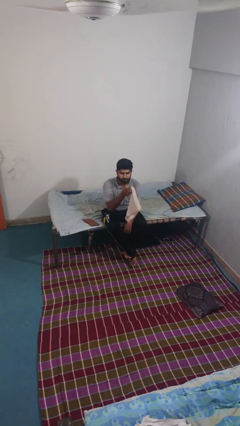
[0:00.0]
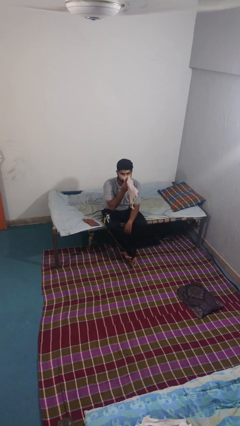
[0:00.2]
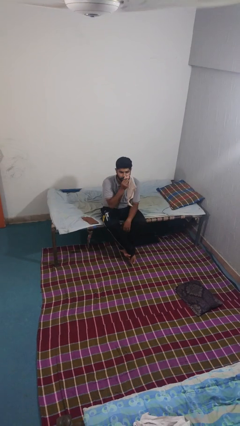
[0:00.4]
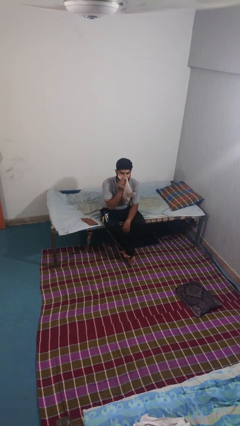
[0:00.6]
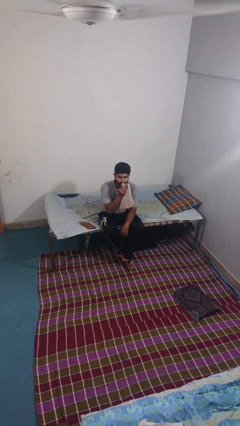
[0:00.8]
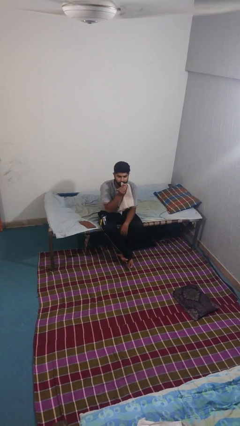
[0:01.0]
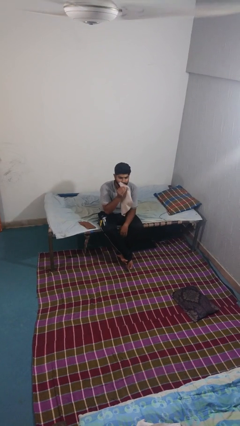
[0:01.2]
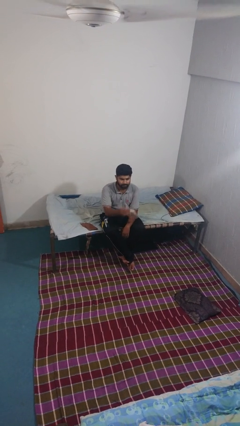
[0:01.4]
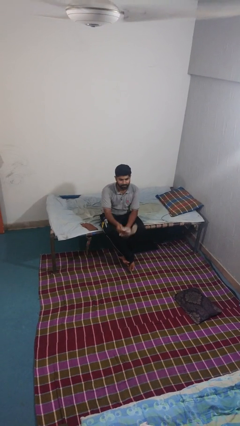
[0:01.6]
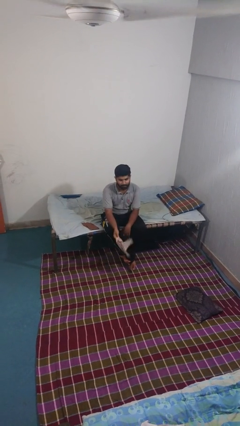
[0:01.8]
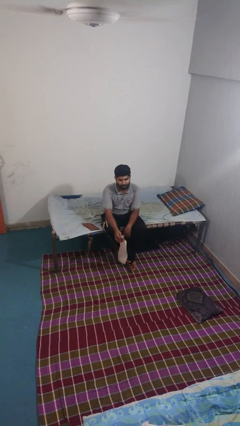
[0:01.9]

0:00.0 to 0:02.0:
person wipes mouth with napkin

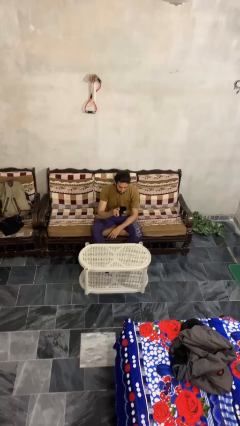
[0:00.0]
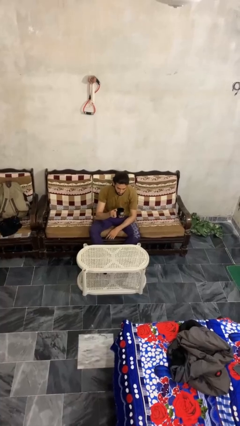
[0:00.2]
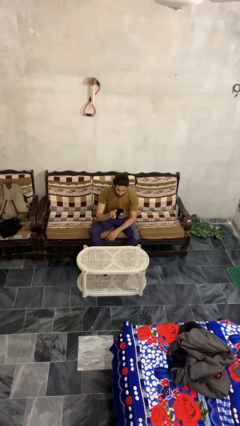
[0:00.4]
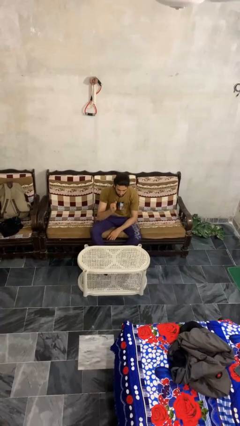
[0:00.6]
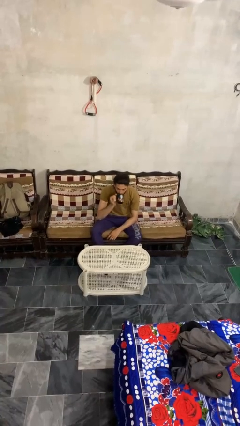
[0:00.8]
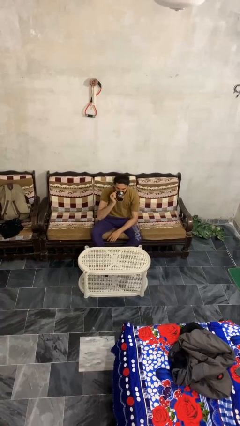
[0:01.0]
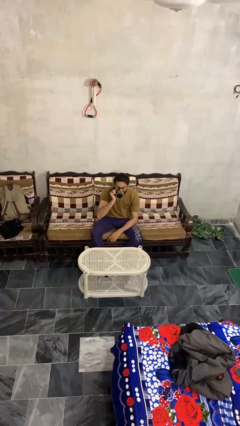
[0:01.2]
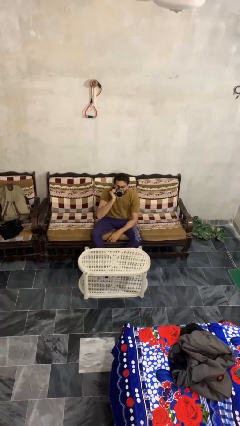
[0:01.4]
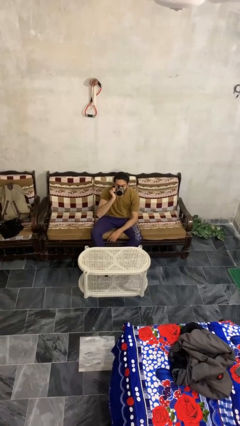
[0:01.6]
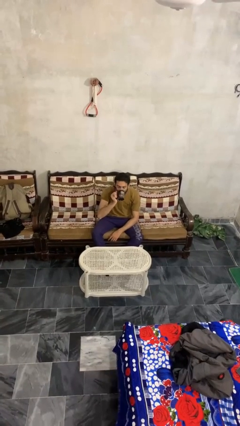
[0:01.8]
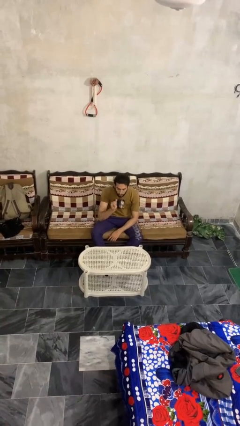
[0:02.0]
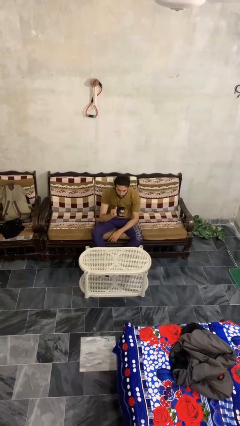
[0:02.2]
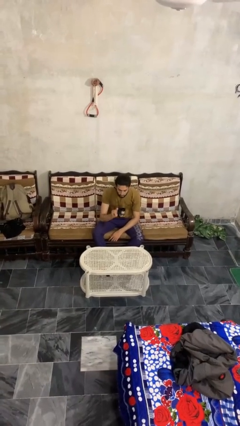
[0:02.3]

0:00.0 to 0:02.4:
person drinks from mug

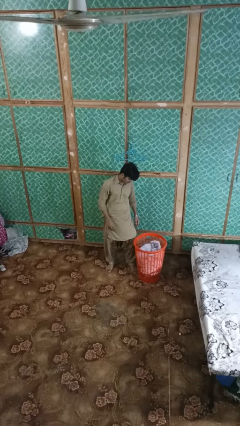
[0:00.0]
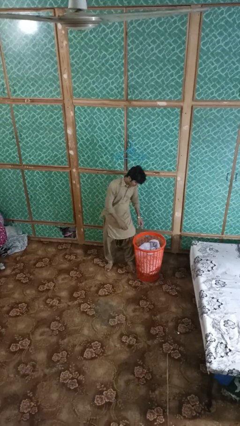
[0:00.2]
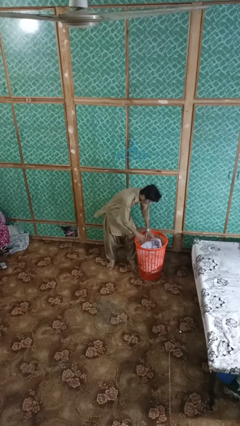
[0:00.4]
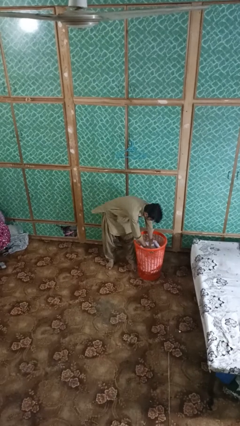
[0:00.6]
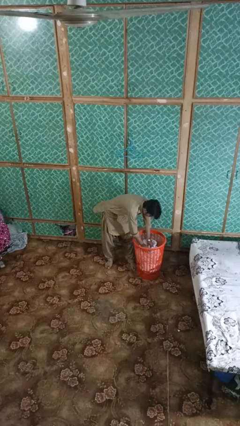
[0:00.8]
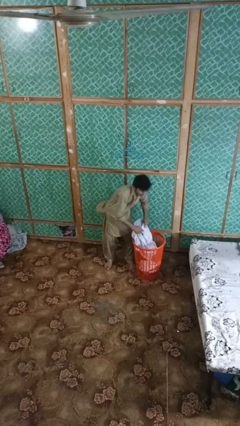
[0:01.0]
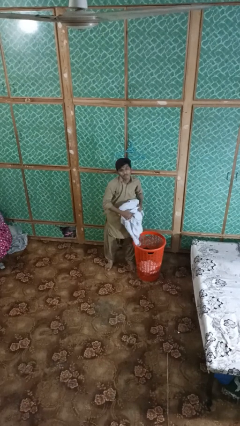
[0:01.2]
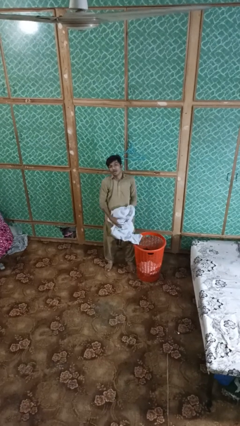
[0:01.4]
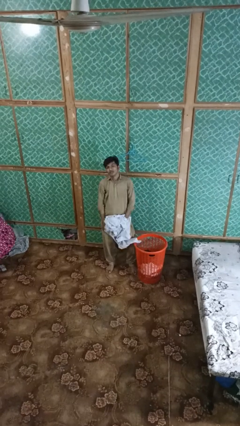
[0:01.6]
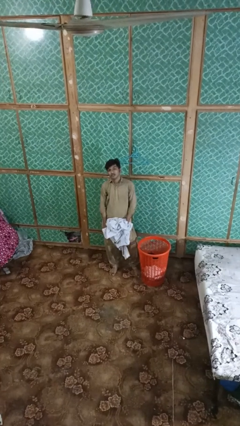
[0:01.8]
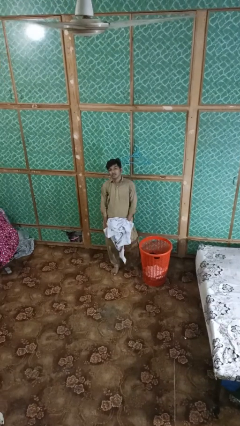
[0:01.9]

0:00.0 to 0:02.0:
person takes object from basket

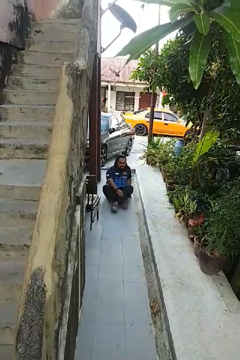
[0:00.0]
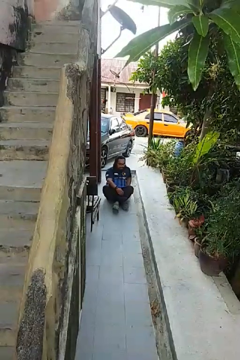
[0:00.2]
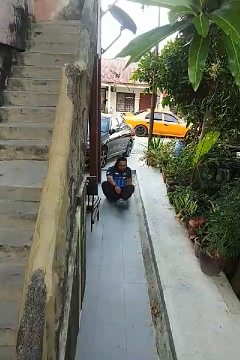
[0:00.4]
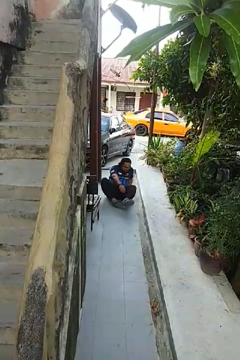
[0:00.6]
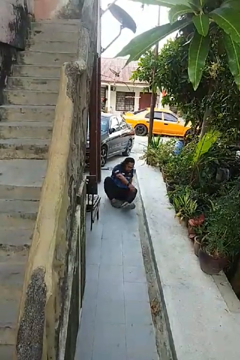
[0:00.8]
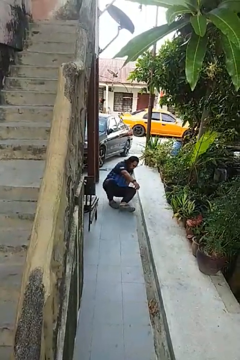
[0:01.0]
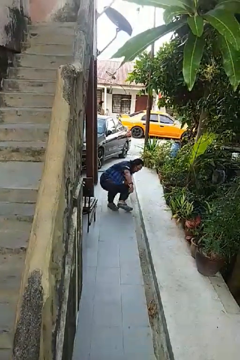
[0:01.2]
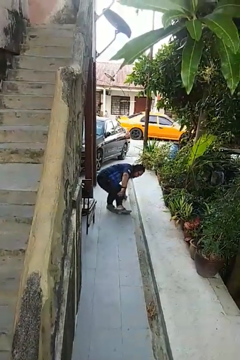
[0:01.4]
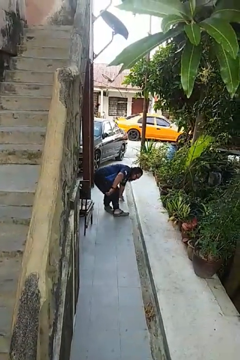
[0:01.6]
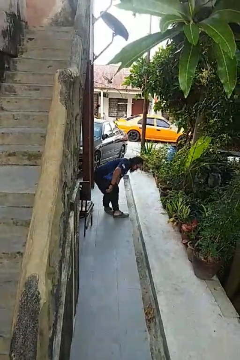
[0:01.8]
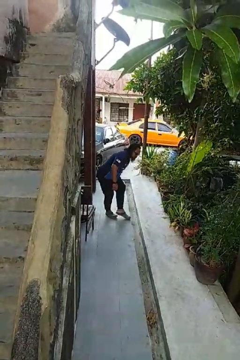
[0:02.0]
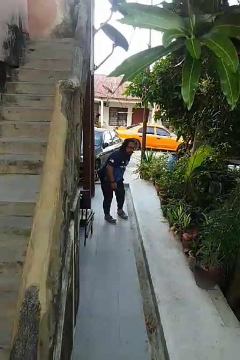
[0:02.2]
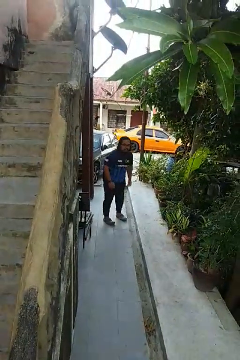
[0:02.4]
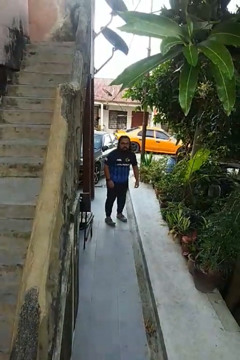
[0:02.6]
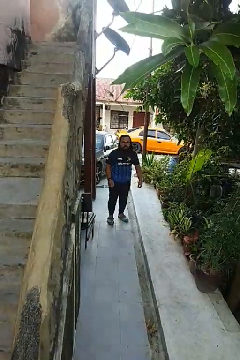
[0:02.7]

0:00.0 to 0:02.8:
person stands up from floor

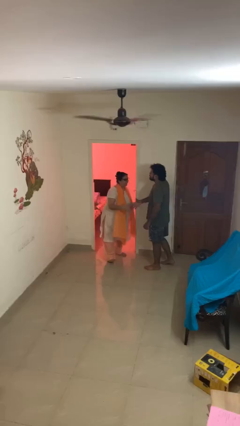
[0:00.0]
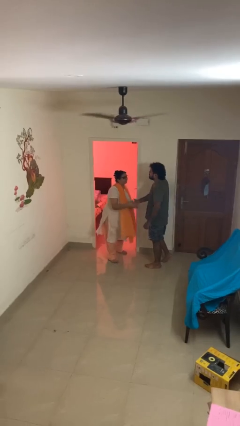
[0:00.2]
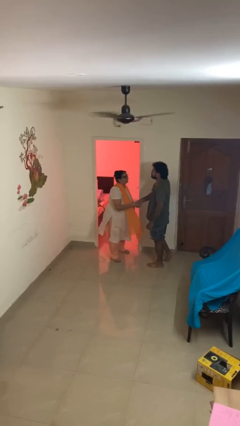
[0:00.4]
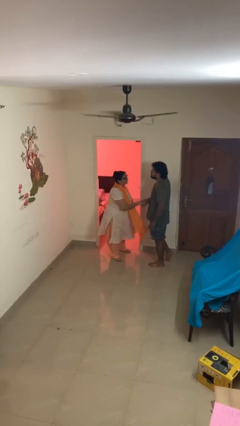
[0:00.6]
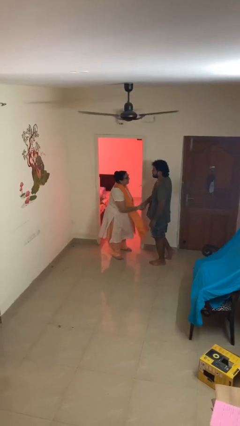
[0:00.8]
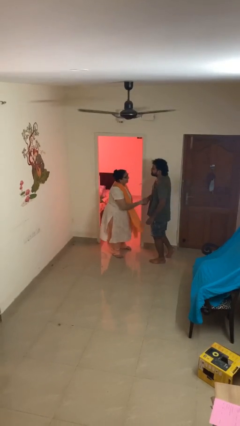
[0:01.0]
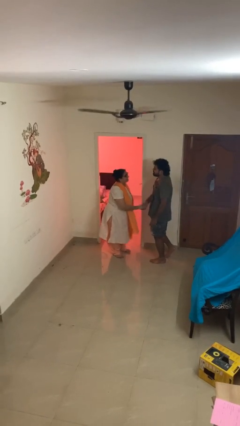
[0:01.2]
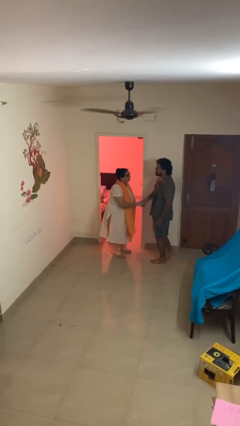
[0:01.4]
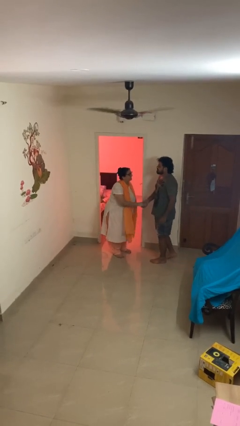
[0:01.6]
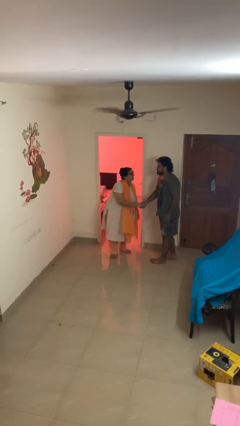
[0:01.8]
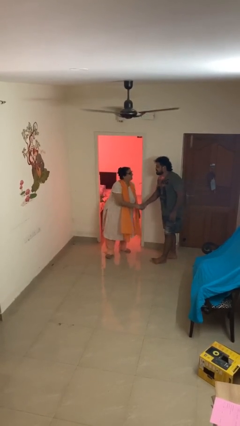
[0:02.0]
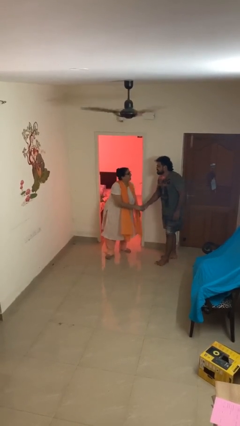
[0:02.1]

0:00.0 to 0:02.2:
person shakes hand

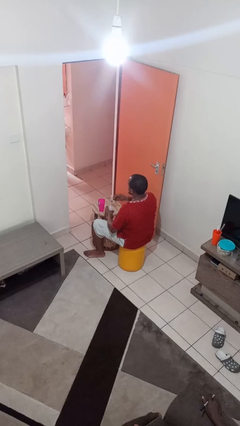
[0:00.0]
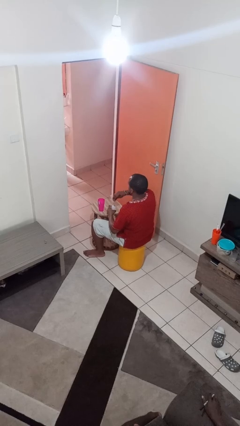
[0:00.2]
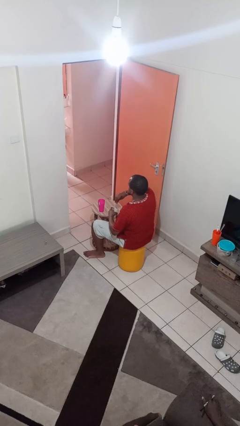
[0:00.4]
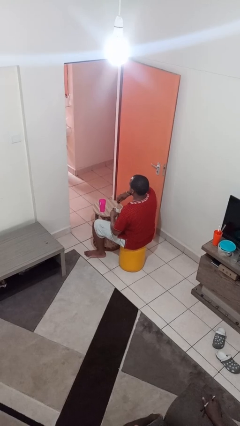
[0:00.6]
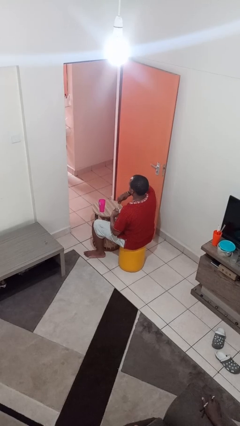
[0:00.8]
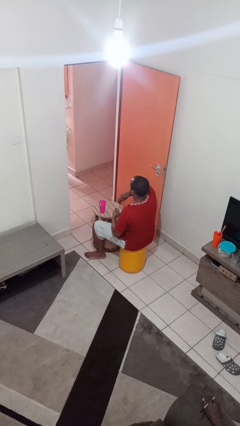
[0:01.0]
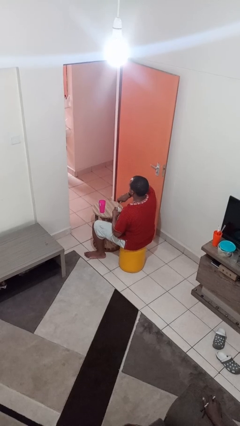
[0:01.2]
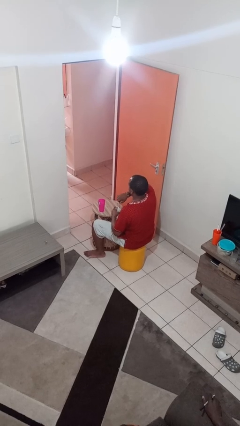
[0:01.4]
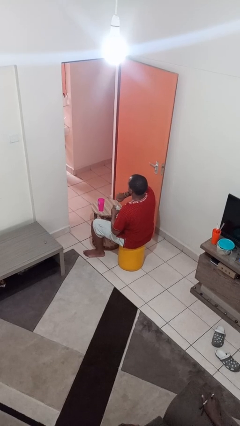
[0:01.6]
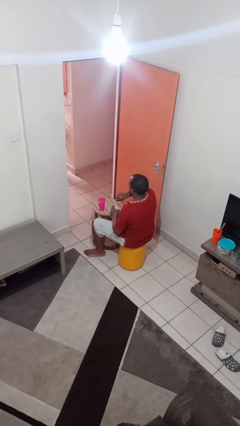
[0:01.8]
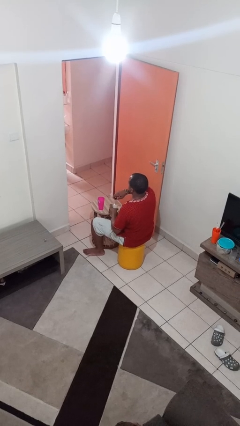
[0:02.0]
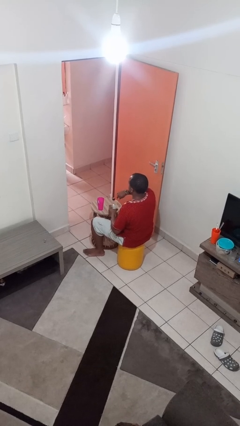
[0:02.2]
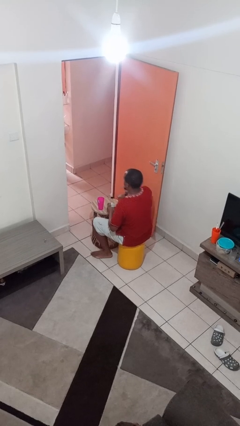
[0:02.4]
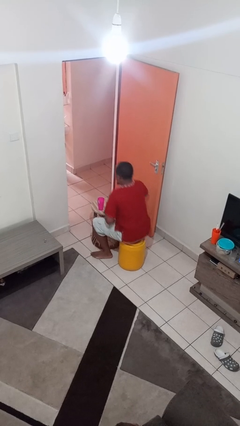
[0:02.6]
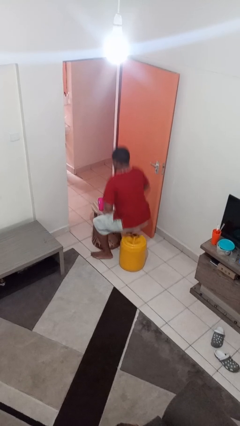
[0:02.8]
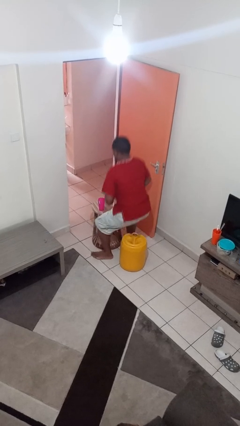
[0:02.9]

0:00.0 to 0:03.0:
person screws lid to bottle

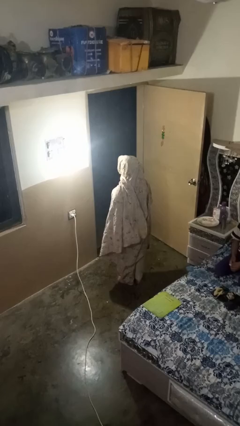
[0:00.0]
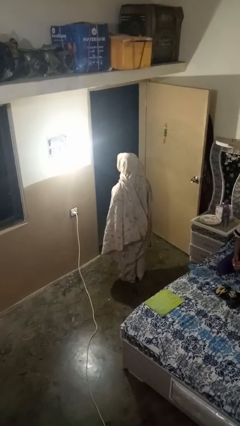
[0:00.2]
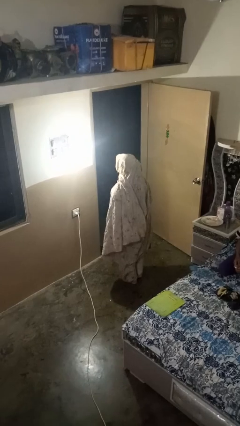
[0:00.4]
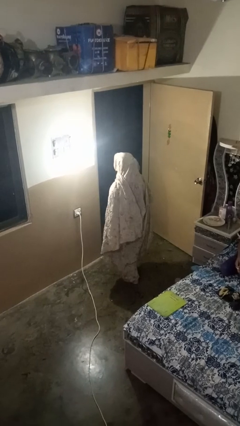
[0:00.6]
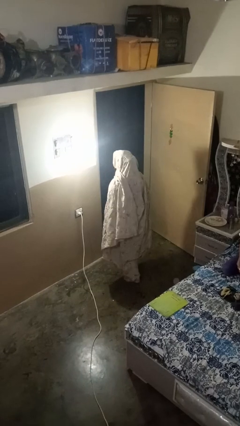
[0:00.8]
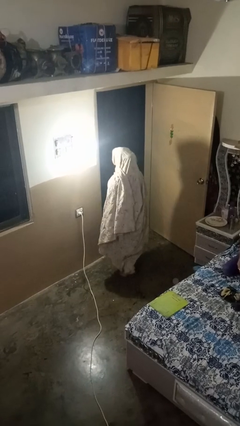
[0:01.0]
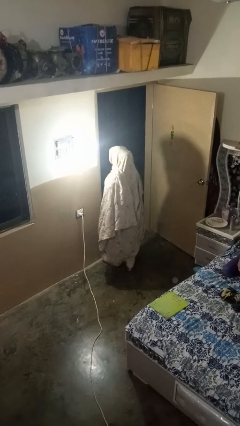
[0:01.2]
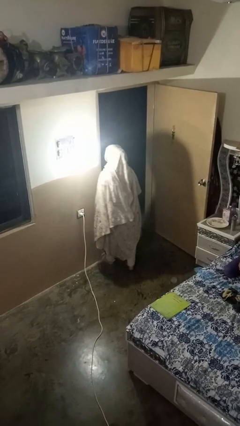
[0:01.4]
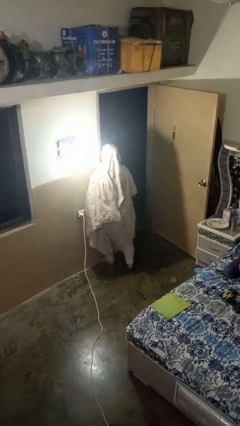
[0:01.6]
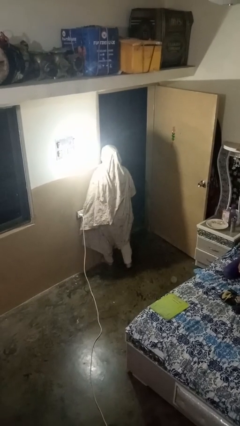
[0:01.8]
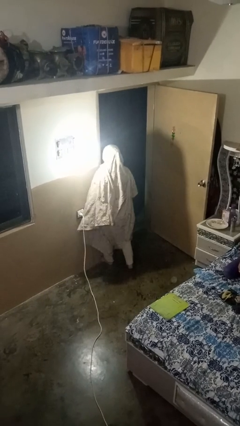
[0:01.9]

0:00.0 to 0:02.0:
person bumps into wall

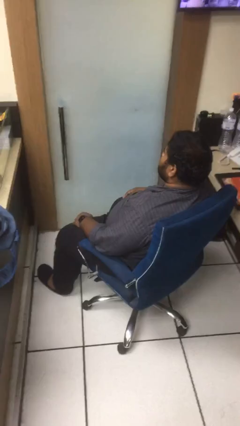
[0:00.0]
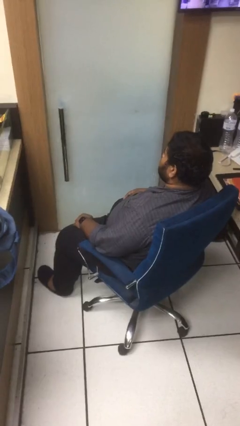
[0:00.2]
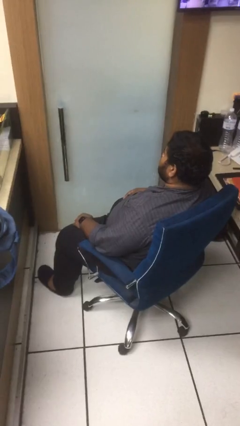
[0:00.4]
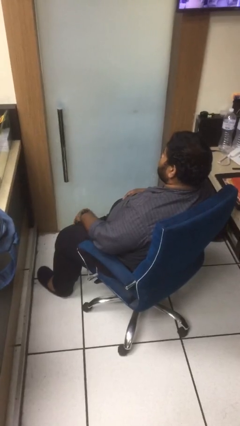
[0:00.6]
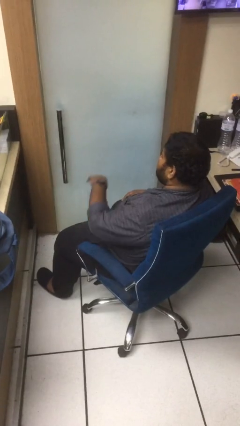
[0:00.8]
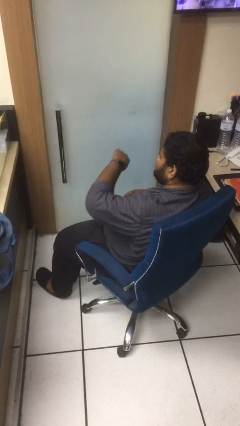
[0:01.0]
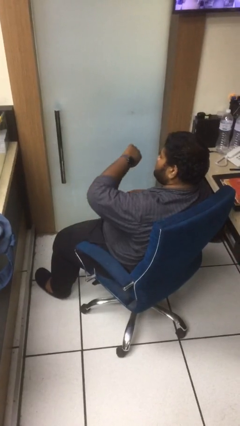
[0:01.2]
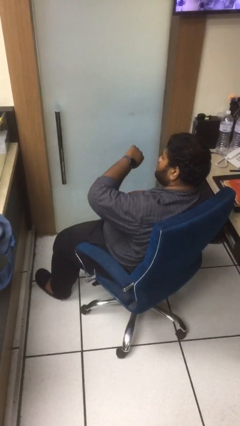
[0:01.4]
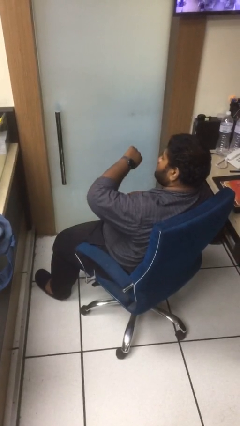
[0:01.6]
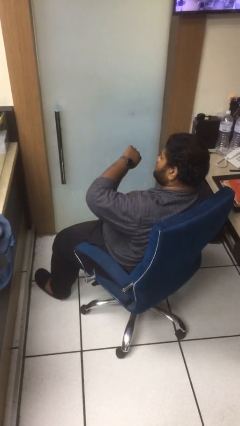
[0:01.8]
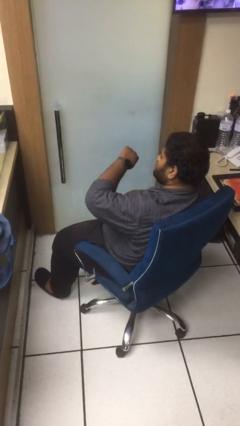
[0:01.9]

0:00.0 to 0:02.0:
person looks at wristwatch
